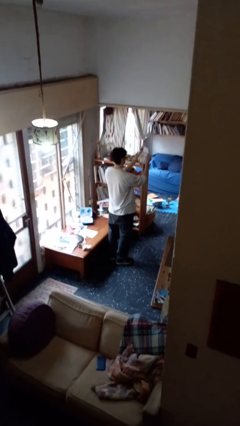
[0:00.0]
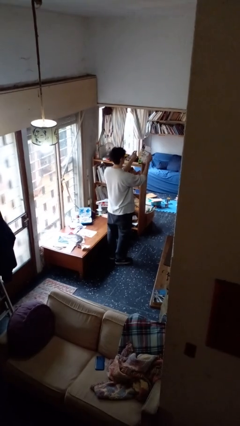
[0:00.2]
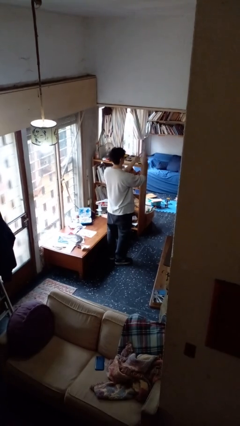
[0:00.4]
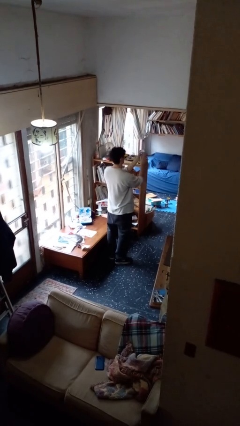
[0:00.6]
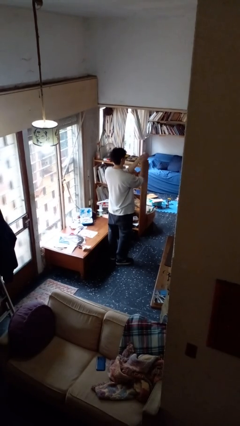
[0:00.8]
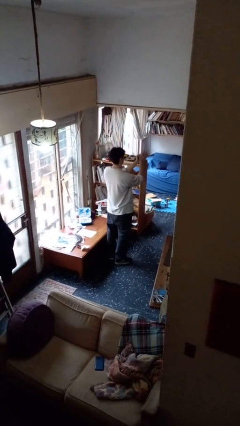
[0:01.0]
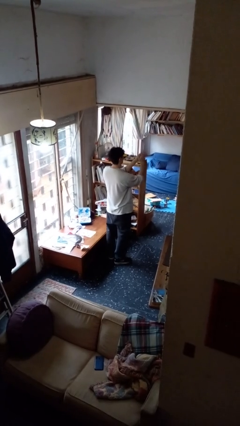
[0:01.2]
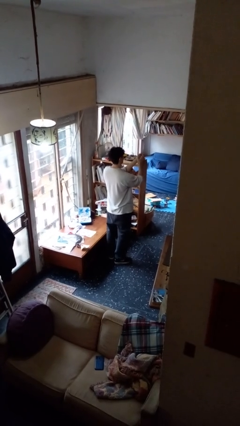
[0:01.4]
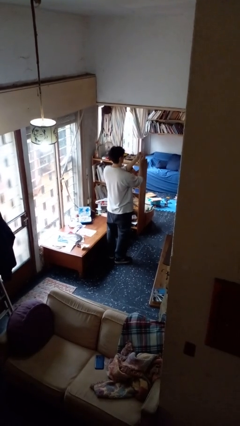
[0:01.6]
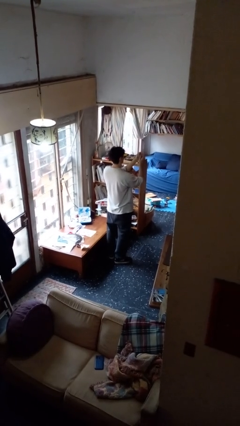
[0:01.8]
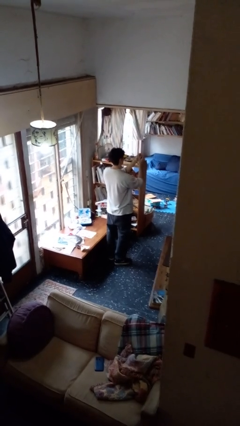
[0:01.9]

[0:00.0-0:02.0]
person crumples paper

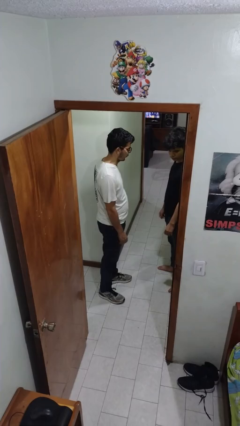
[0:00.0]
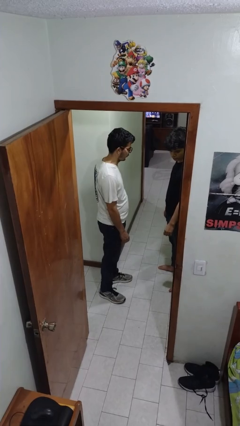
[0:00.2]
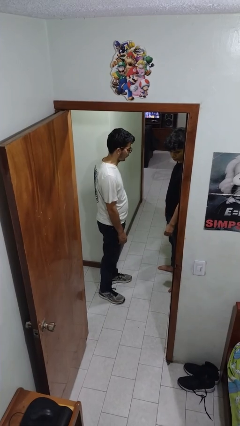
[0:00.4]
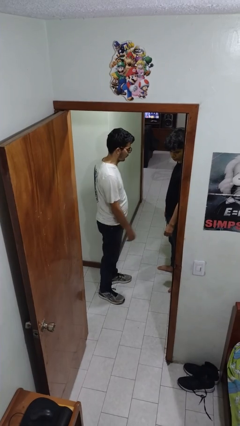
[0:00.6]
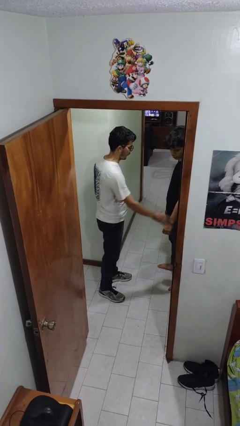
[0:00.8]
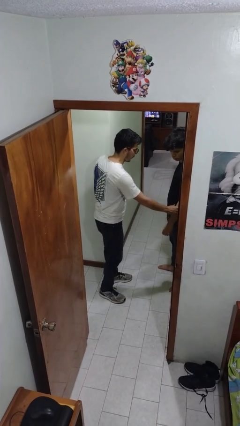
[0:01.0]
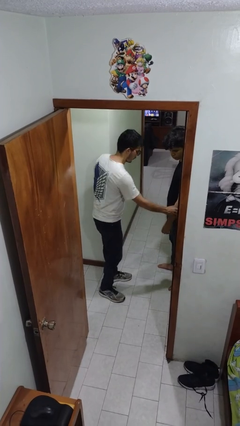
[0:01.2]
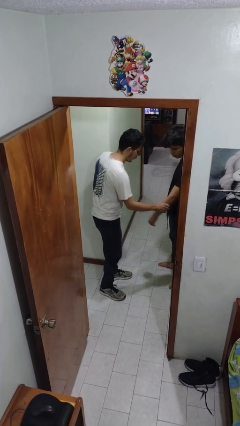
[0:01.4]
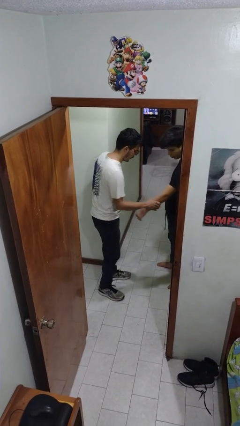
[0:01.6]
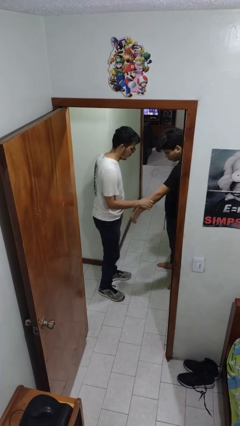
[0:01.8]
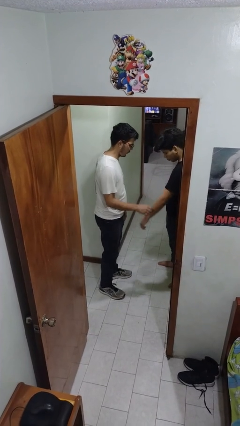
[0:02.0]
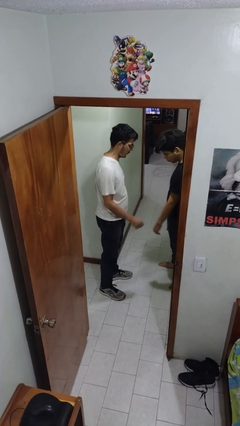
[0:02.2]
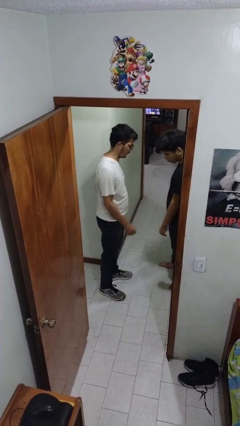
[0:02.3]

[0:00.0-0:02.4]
person grabs person by forearm

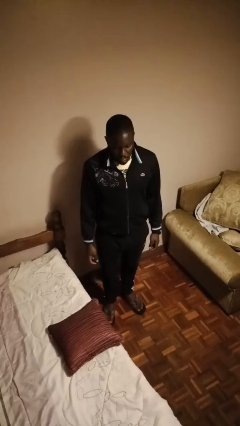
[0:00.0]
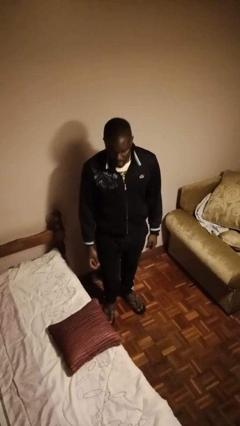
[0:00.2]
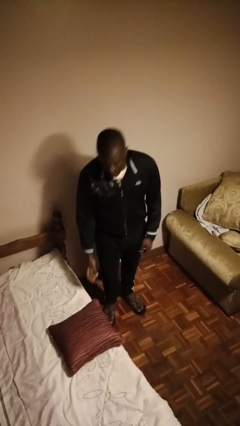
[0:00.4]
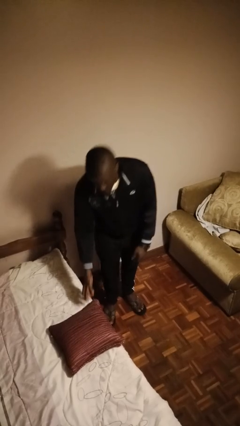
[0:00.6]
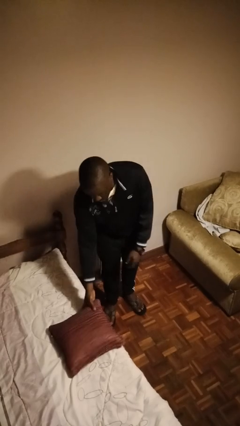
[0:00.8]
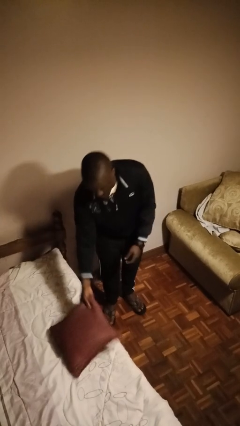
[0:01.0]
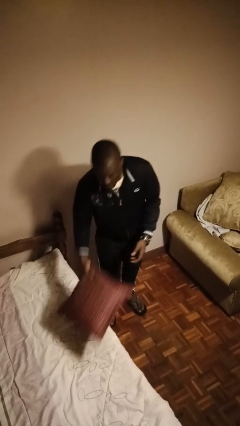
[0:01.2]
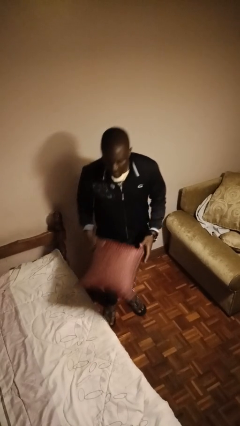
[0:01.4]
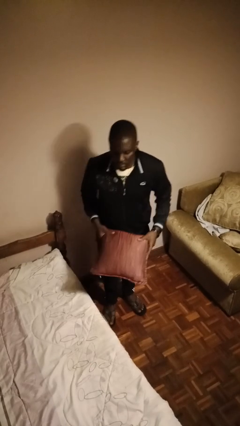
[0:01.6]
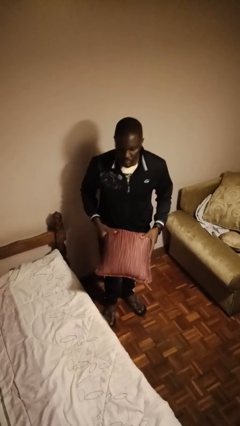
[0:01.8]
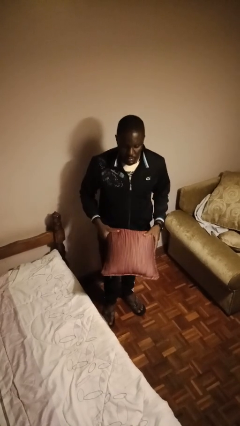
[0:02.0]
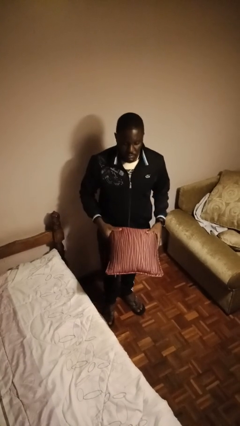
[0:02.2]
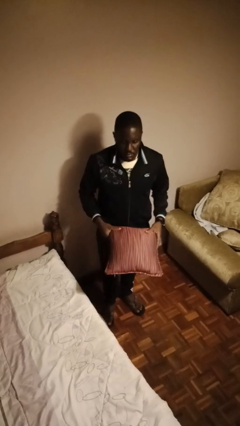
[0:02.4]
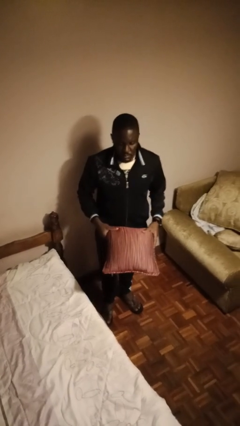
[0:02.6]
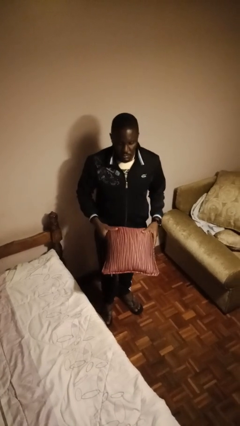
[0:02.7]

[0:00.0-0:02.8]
person picks up object from bed

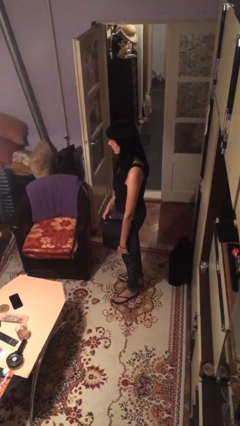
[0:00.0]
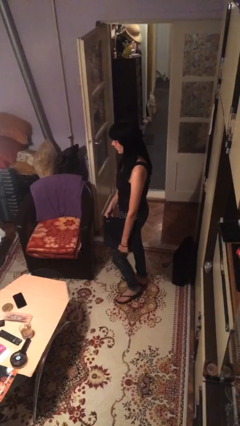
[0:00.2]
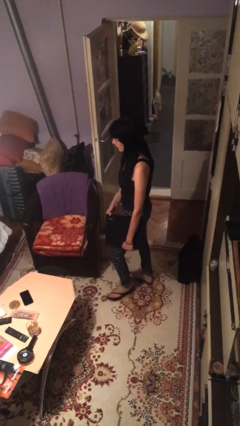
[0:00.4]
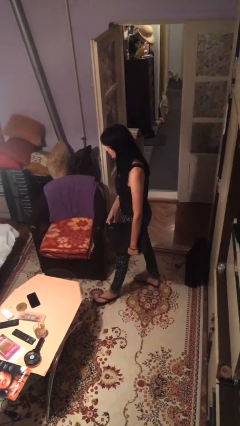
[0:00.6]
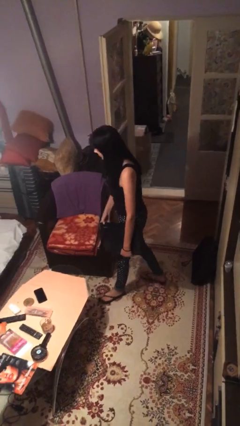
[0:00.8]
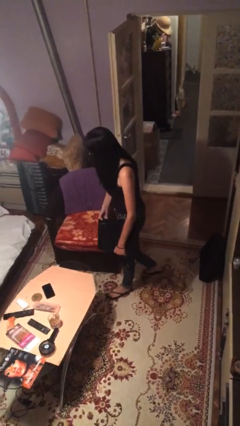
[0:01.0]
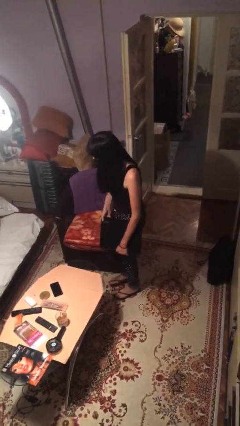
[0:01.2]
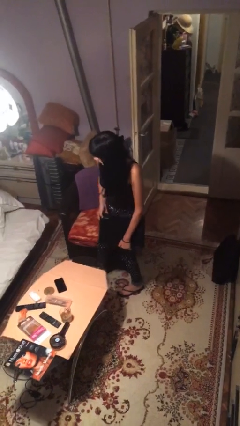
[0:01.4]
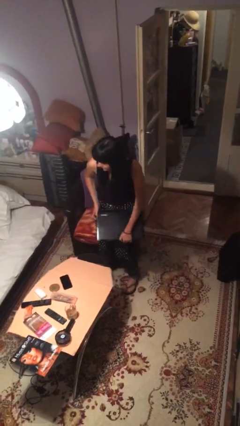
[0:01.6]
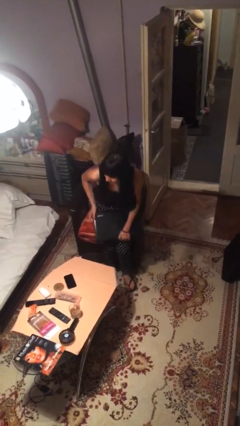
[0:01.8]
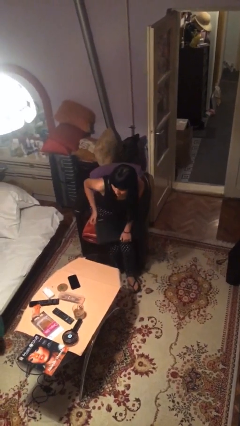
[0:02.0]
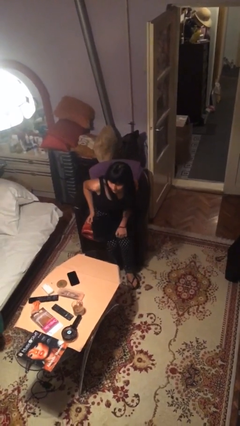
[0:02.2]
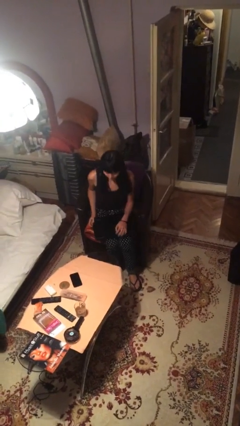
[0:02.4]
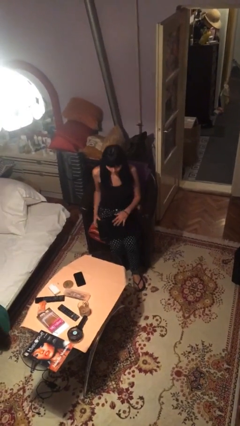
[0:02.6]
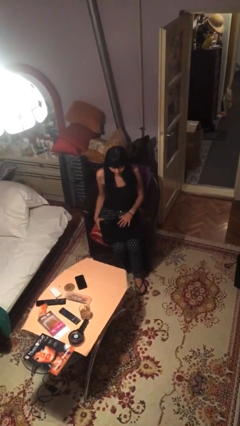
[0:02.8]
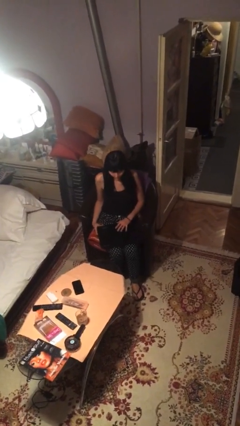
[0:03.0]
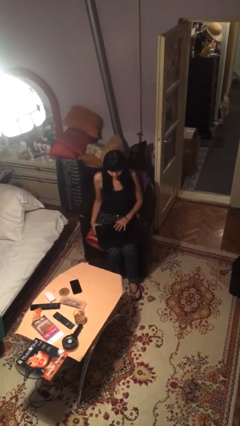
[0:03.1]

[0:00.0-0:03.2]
person sits down

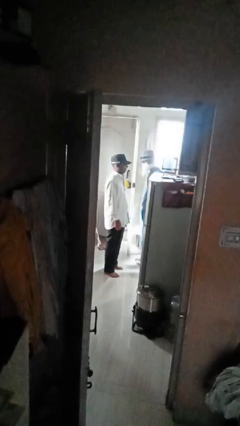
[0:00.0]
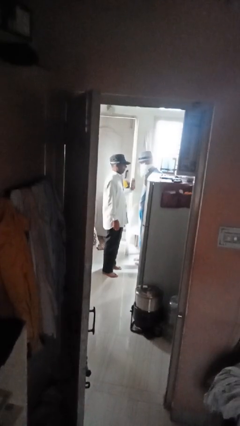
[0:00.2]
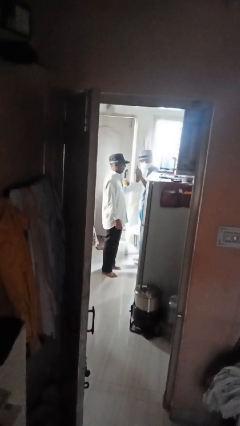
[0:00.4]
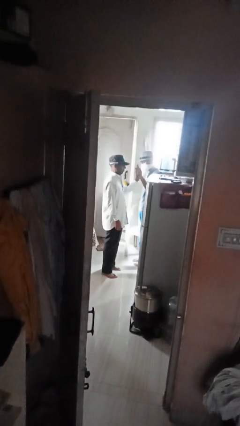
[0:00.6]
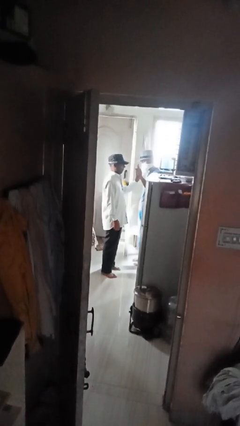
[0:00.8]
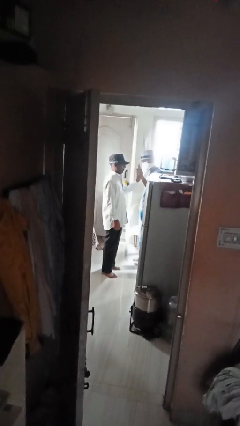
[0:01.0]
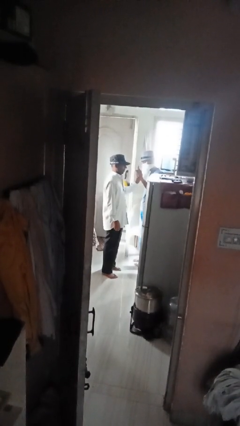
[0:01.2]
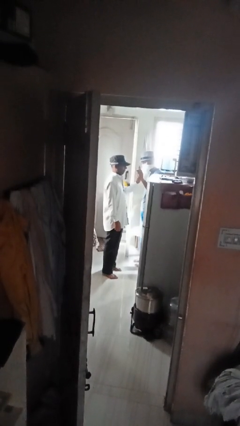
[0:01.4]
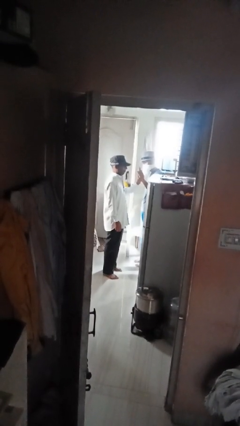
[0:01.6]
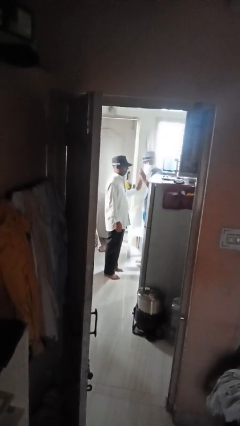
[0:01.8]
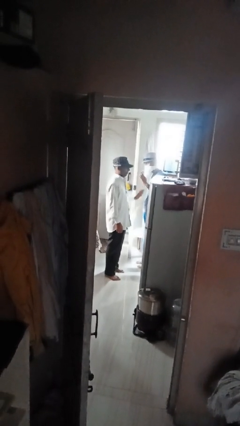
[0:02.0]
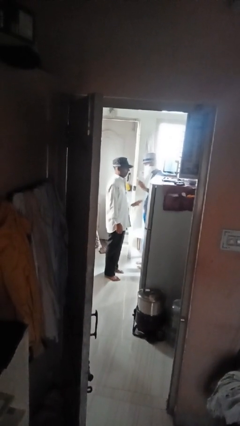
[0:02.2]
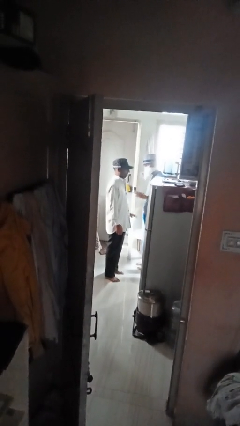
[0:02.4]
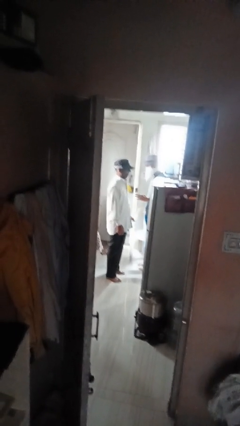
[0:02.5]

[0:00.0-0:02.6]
person highfives hand

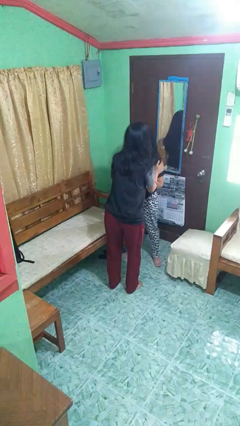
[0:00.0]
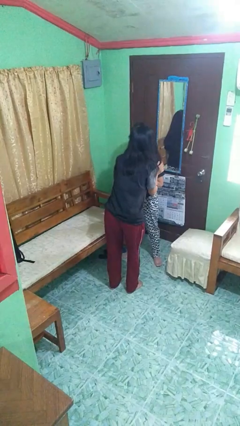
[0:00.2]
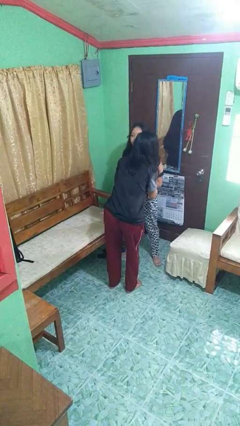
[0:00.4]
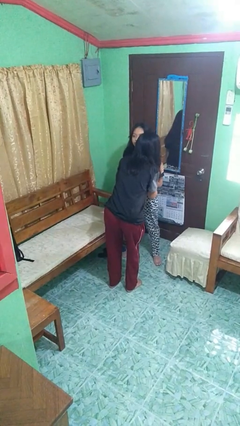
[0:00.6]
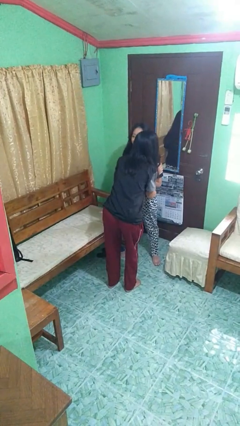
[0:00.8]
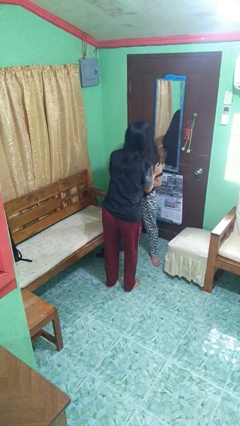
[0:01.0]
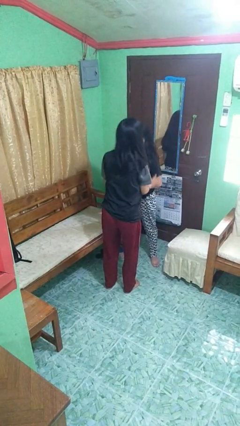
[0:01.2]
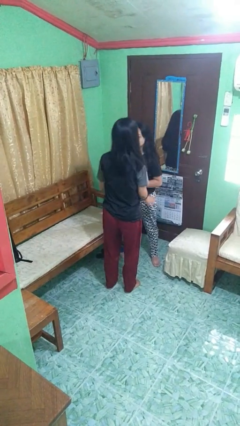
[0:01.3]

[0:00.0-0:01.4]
person kisses cheek of person

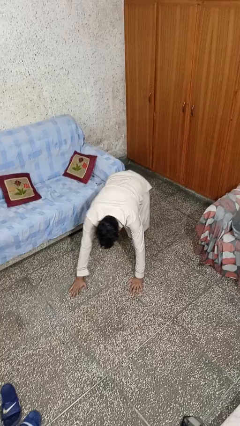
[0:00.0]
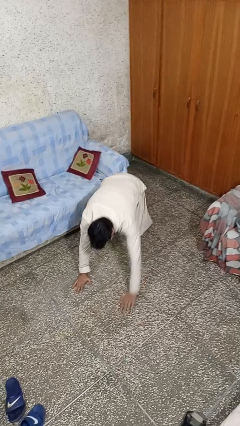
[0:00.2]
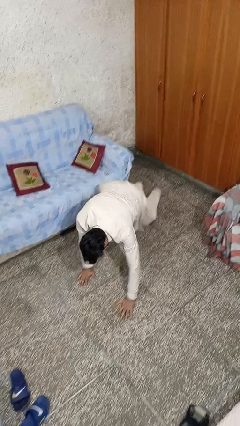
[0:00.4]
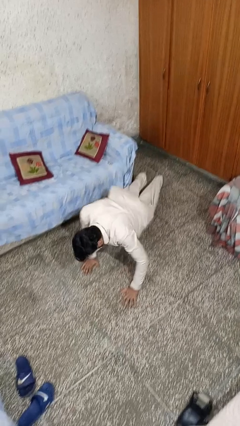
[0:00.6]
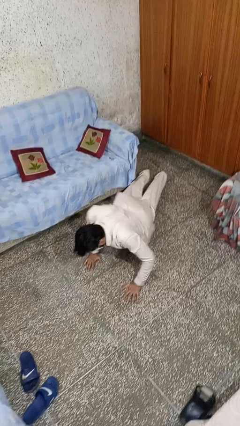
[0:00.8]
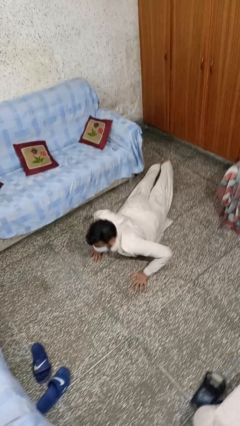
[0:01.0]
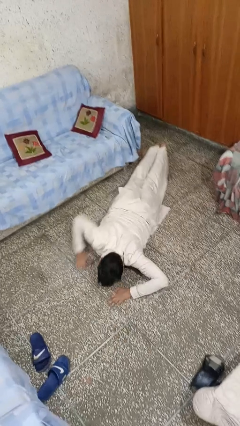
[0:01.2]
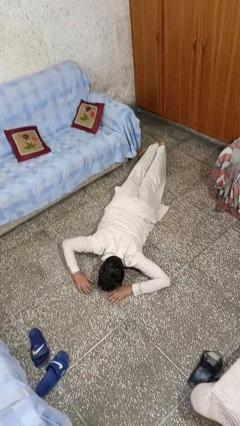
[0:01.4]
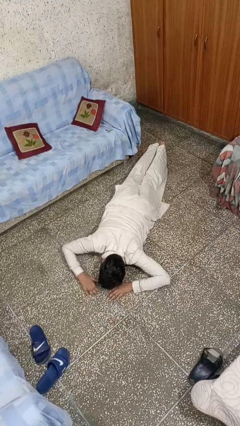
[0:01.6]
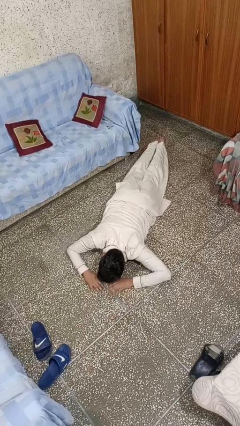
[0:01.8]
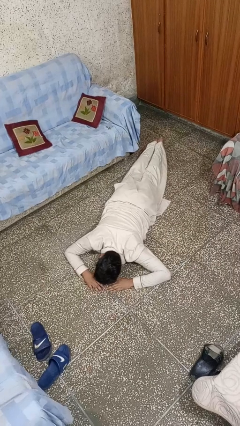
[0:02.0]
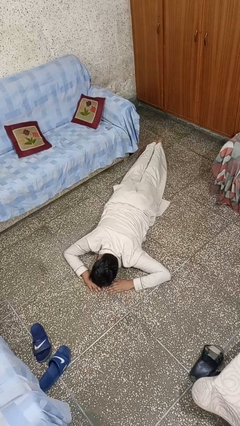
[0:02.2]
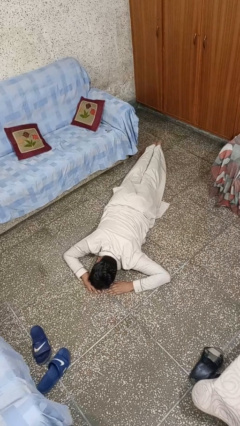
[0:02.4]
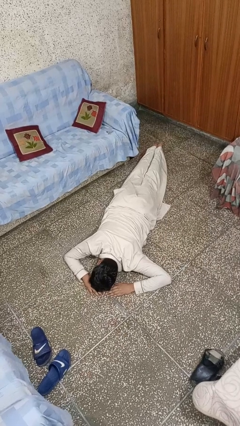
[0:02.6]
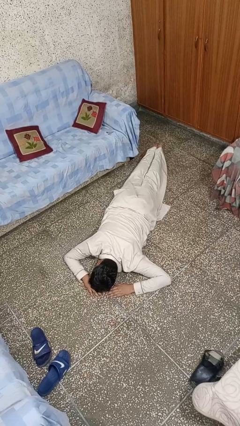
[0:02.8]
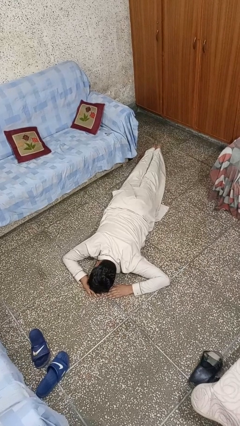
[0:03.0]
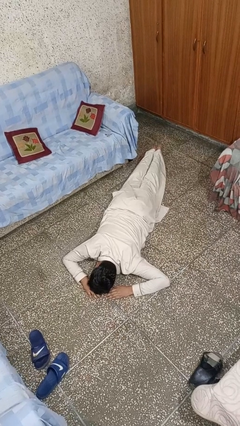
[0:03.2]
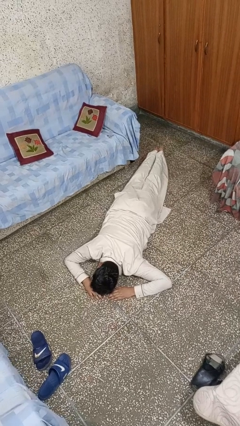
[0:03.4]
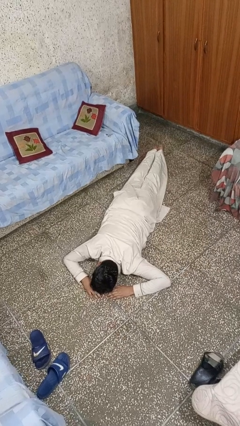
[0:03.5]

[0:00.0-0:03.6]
person lies down on floor
